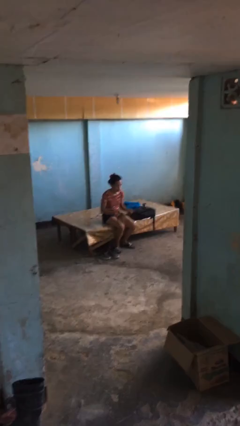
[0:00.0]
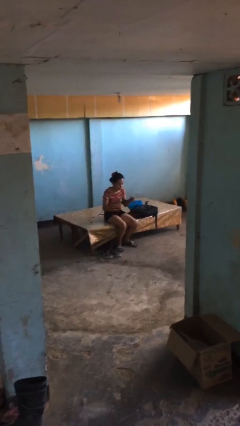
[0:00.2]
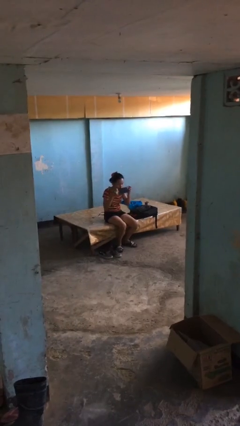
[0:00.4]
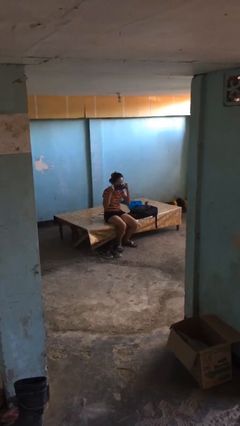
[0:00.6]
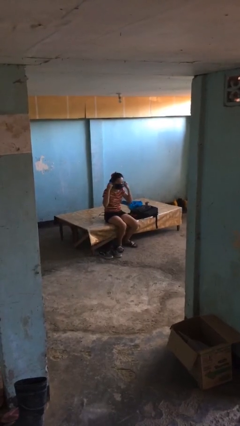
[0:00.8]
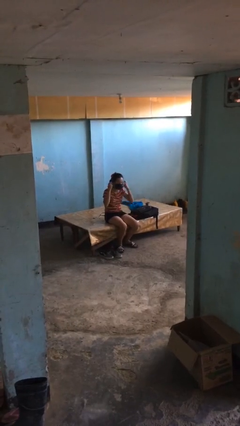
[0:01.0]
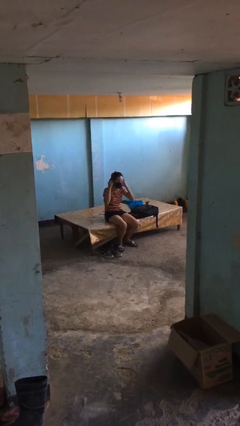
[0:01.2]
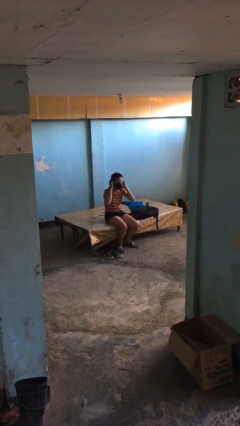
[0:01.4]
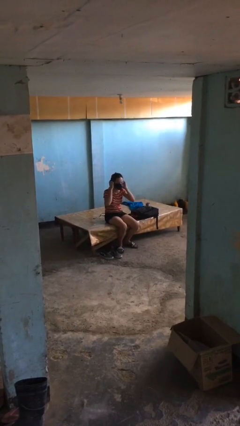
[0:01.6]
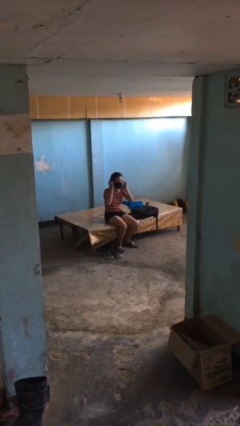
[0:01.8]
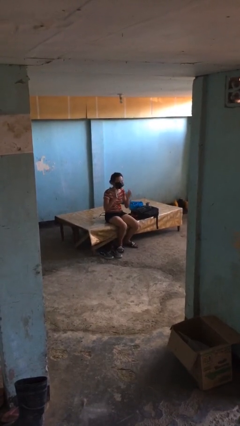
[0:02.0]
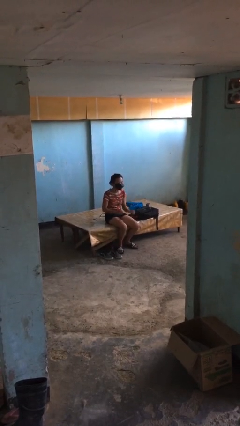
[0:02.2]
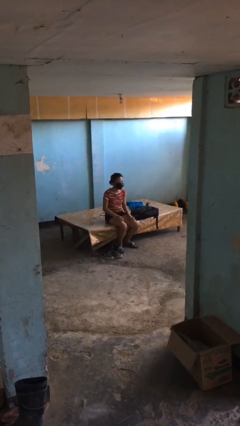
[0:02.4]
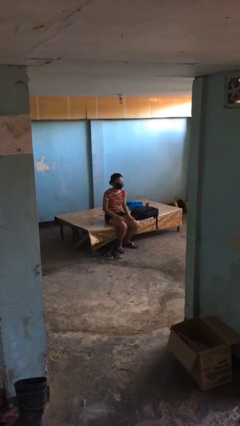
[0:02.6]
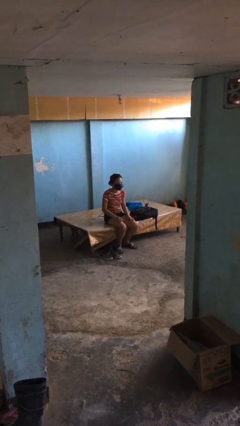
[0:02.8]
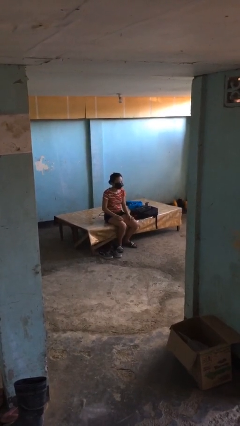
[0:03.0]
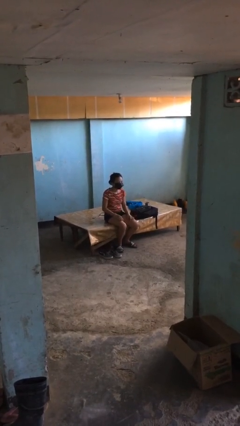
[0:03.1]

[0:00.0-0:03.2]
person puts on facemask

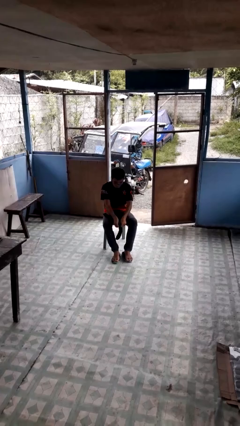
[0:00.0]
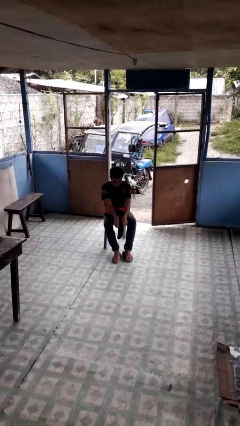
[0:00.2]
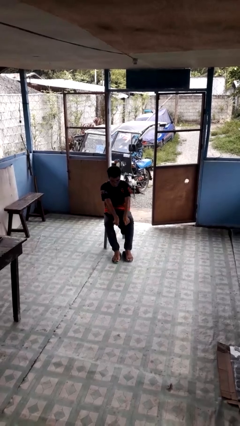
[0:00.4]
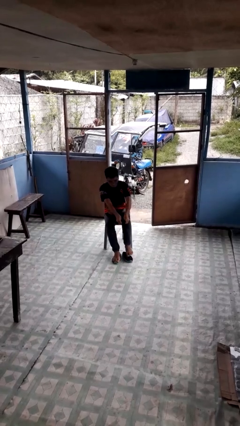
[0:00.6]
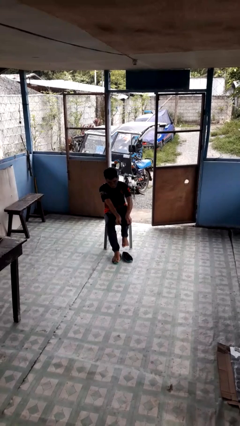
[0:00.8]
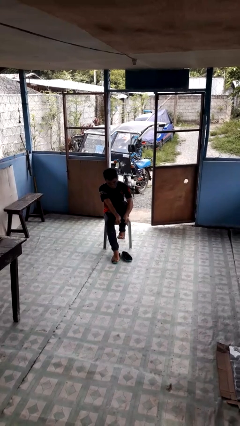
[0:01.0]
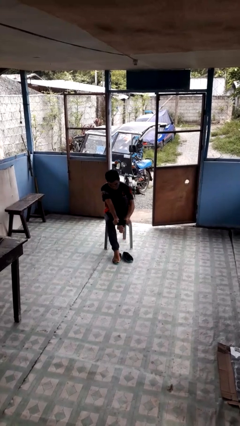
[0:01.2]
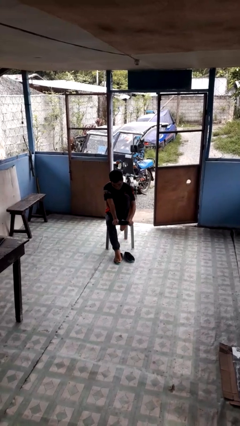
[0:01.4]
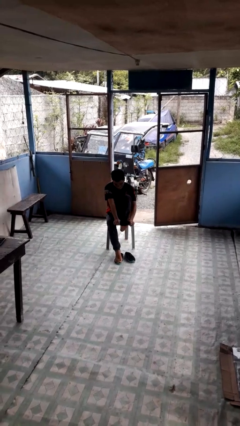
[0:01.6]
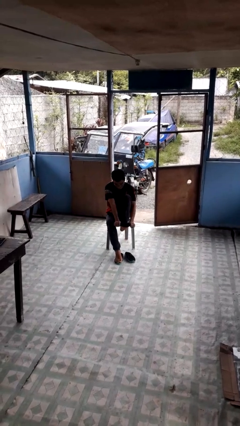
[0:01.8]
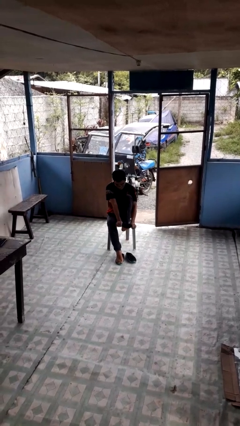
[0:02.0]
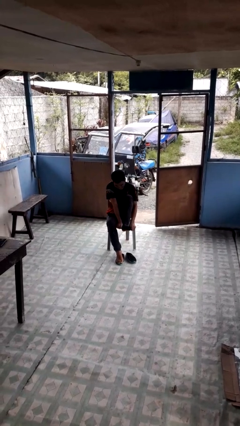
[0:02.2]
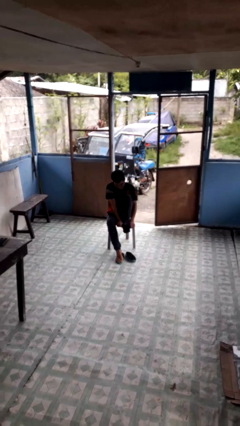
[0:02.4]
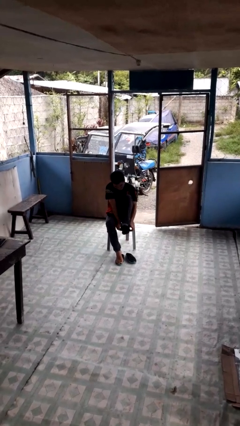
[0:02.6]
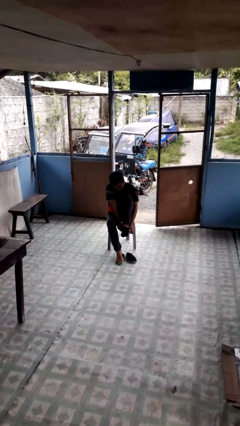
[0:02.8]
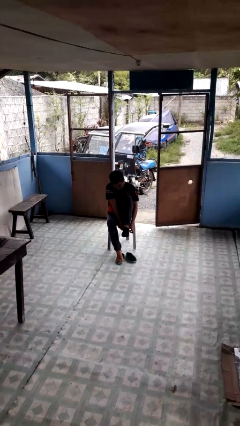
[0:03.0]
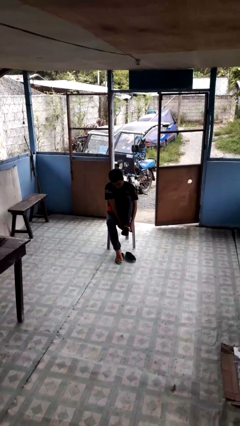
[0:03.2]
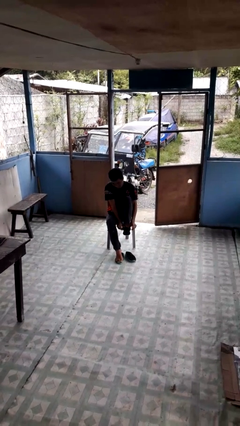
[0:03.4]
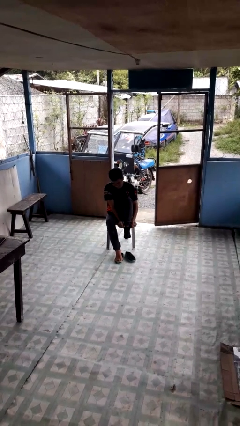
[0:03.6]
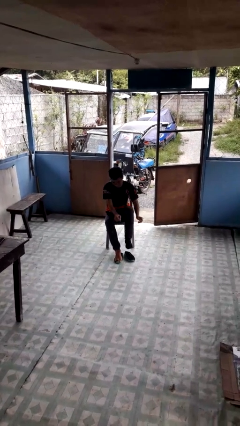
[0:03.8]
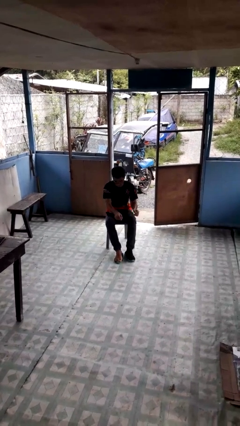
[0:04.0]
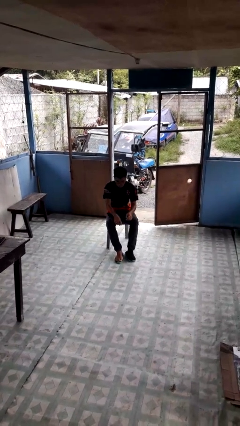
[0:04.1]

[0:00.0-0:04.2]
person puts on socks

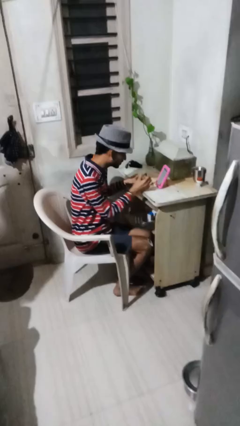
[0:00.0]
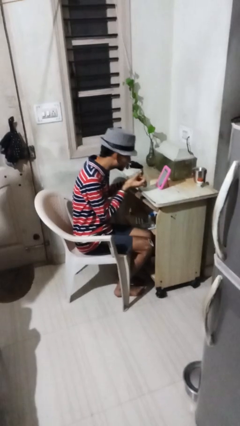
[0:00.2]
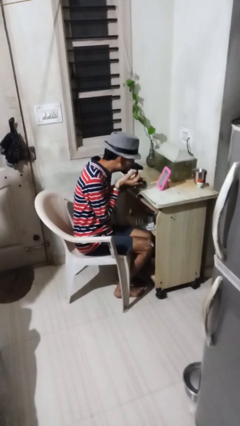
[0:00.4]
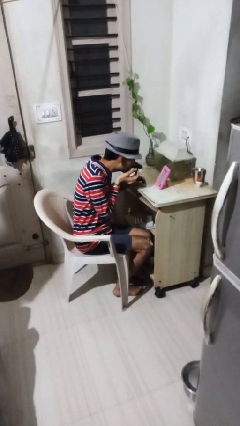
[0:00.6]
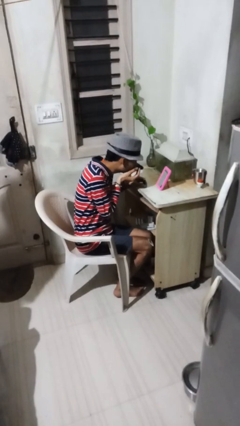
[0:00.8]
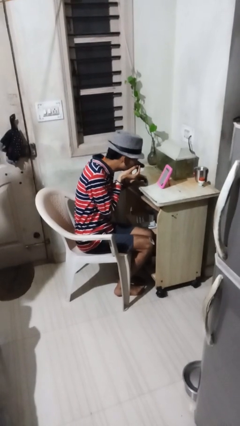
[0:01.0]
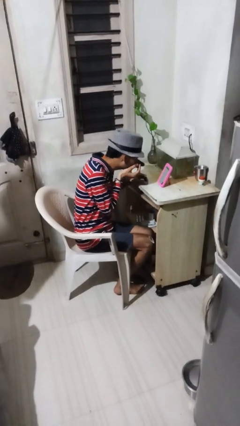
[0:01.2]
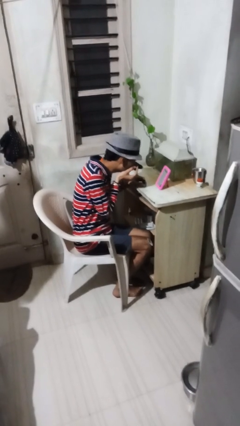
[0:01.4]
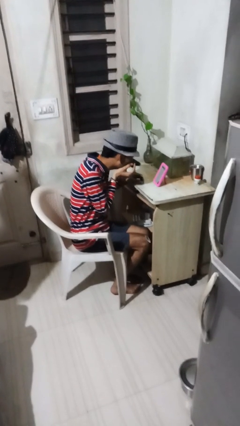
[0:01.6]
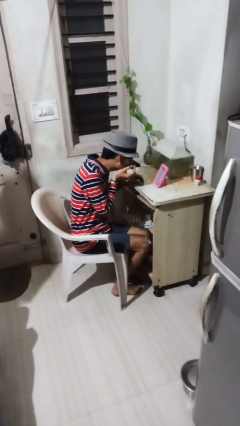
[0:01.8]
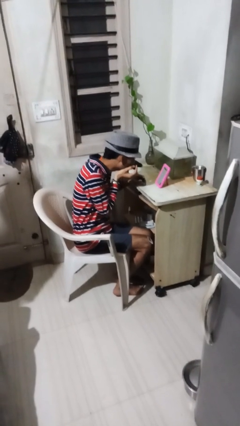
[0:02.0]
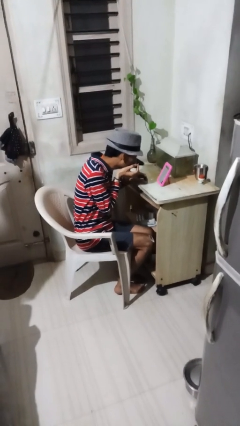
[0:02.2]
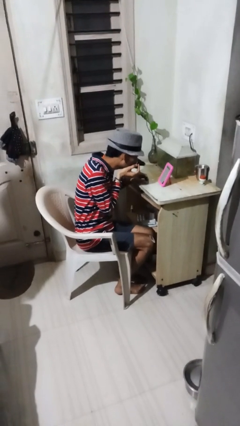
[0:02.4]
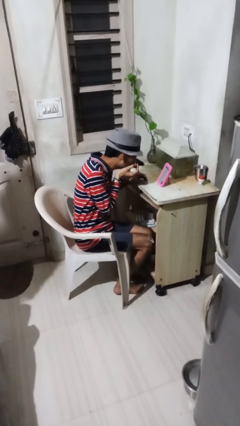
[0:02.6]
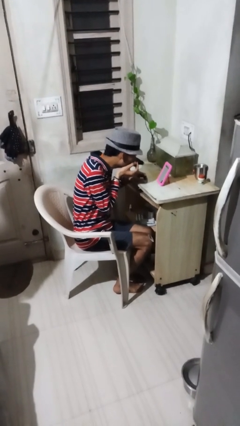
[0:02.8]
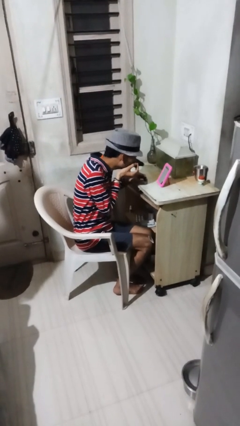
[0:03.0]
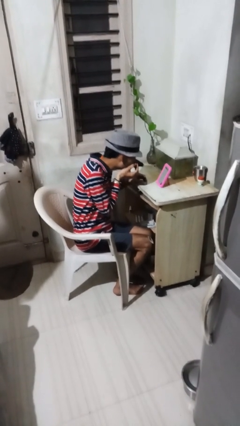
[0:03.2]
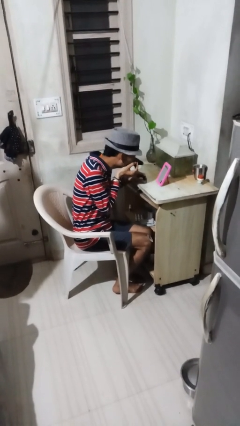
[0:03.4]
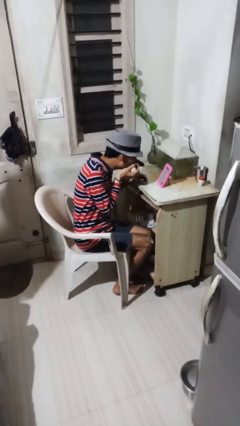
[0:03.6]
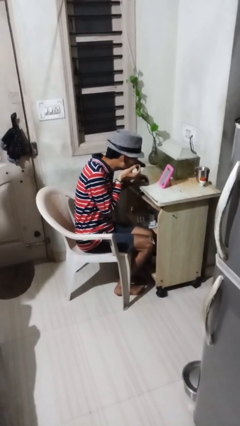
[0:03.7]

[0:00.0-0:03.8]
person applies eye makeup

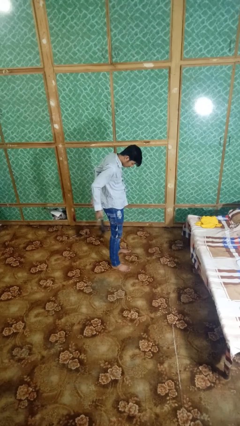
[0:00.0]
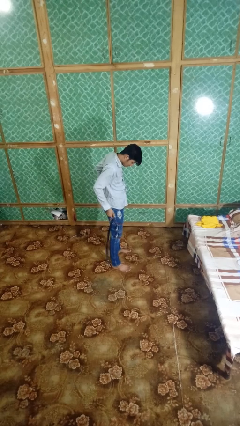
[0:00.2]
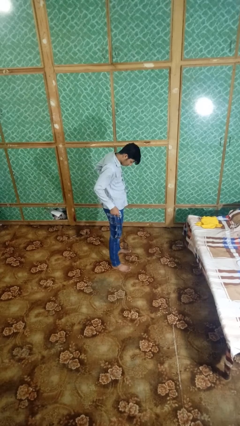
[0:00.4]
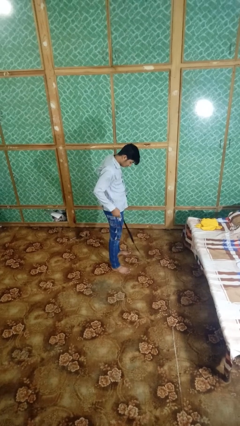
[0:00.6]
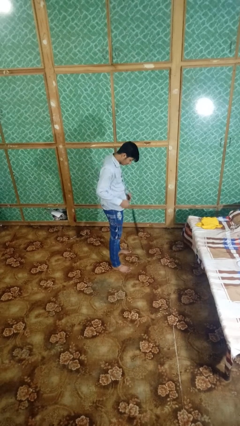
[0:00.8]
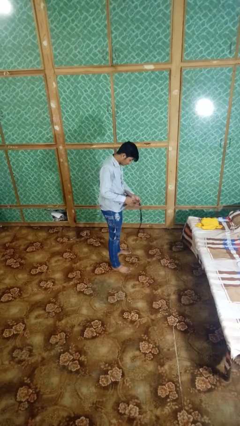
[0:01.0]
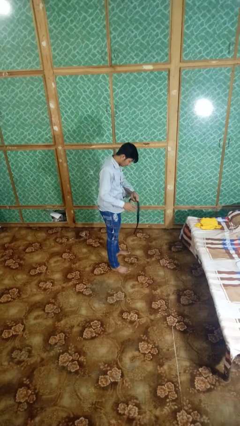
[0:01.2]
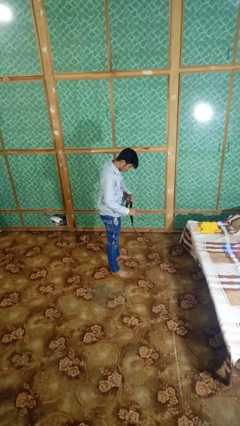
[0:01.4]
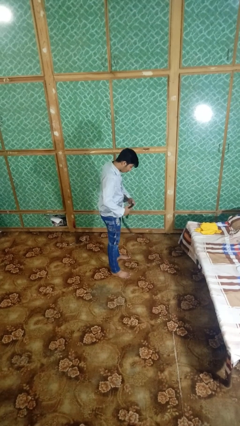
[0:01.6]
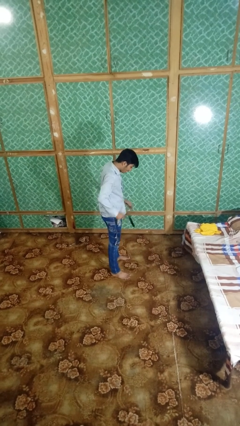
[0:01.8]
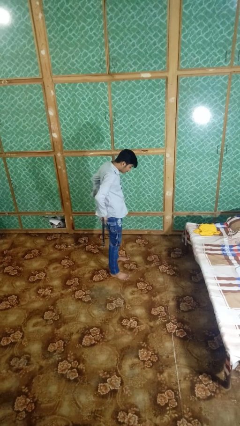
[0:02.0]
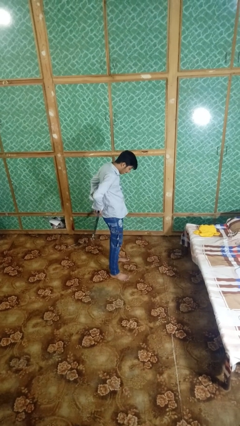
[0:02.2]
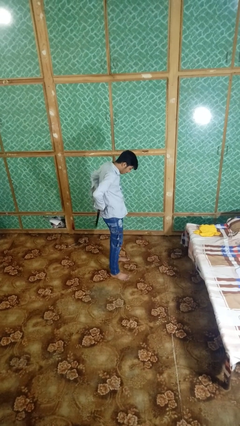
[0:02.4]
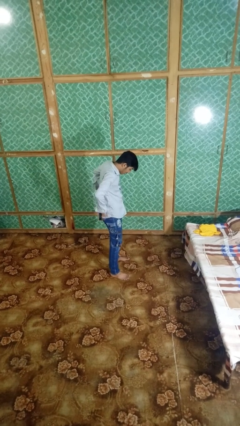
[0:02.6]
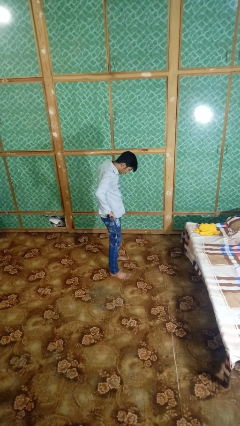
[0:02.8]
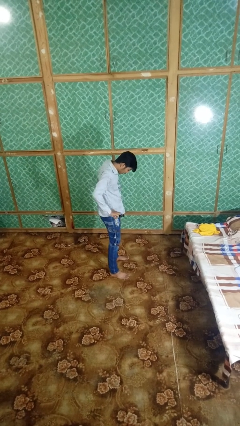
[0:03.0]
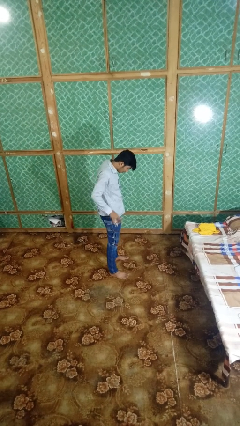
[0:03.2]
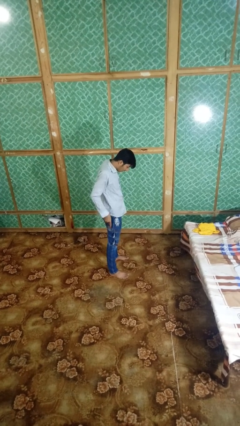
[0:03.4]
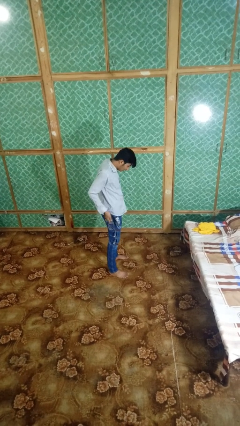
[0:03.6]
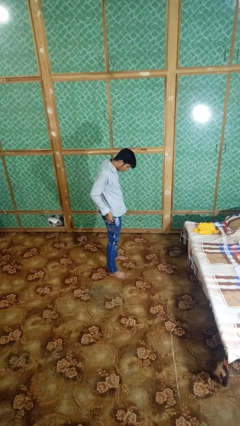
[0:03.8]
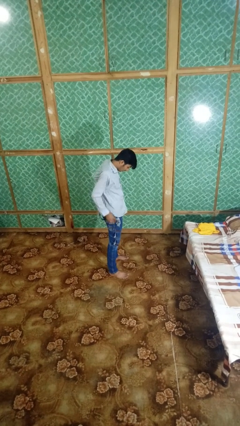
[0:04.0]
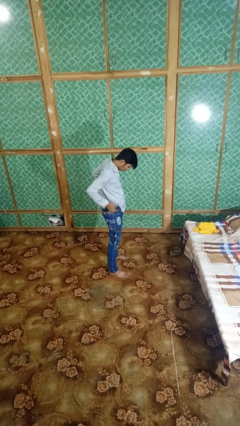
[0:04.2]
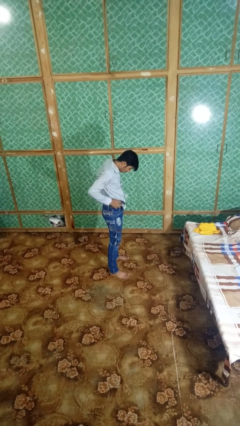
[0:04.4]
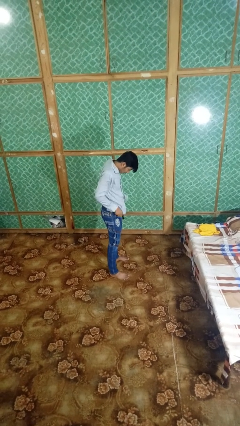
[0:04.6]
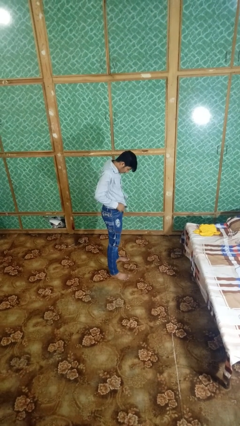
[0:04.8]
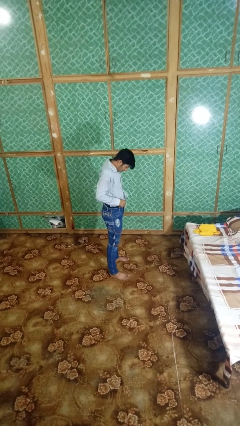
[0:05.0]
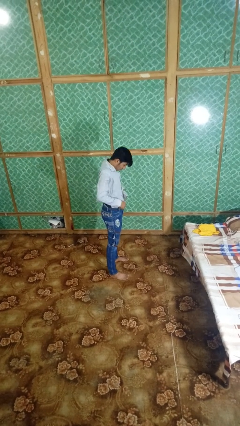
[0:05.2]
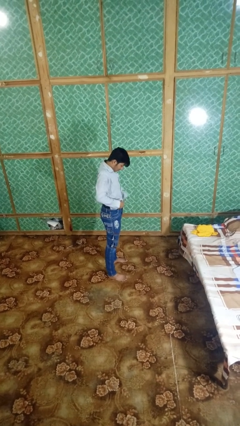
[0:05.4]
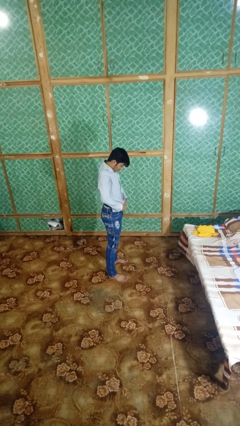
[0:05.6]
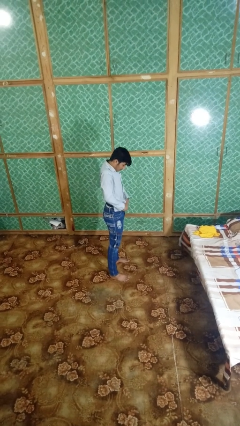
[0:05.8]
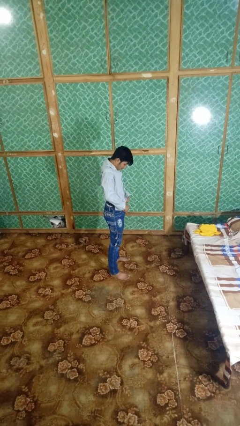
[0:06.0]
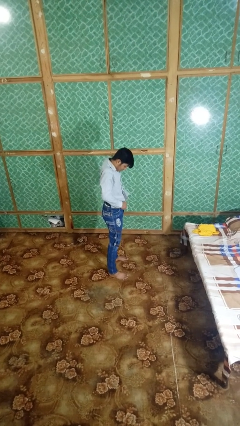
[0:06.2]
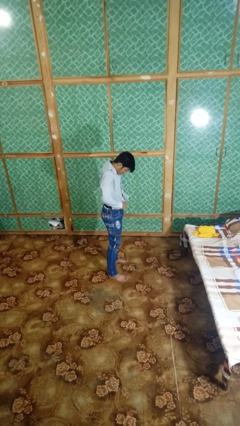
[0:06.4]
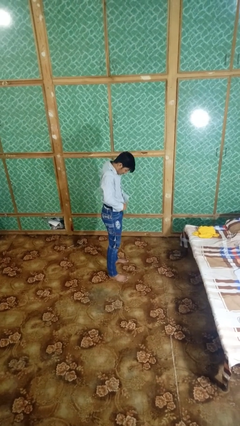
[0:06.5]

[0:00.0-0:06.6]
person puts on belt

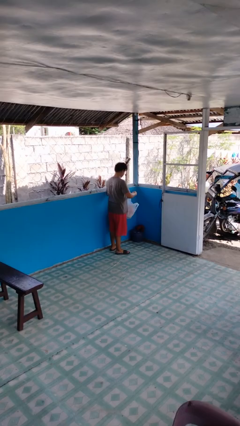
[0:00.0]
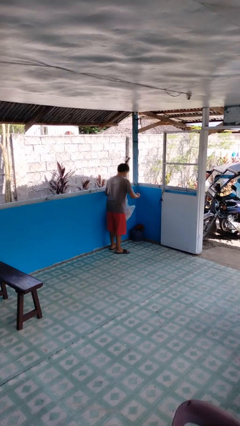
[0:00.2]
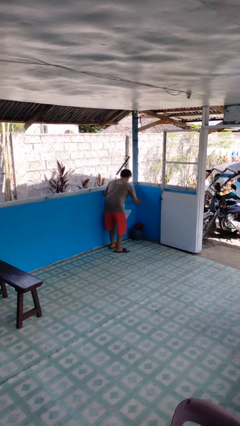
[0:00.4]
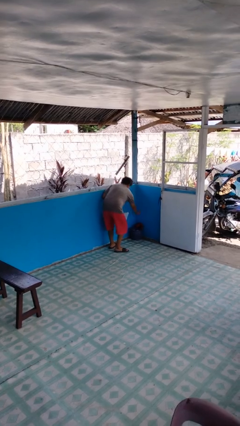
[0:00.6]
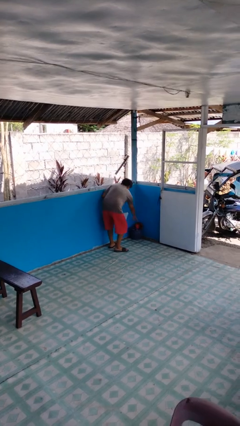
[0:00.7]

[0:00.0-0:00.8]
person discards trash
